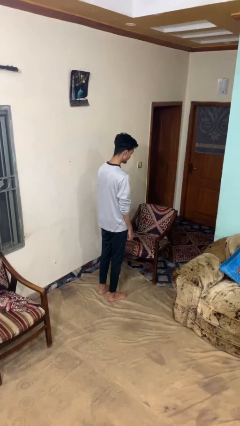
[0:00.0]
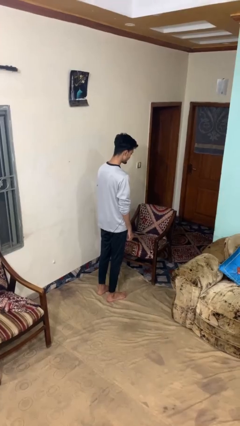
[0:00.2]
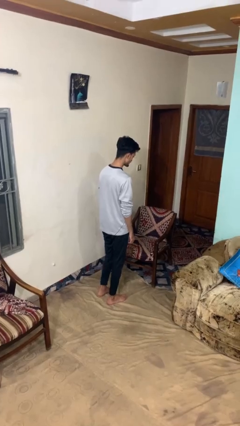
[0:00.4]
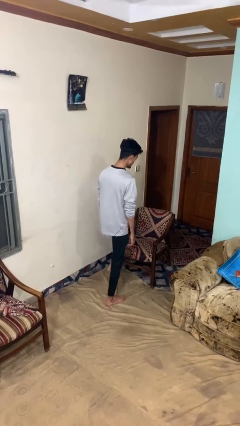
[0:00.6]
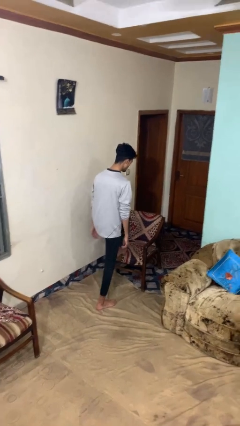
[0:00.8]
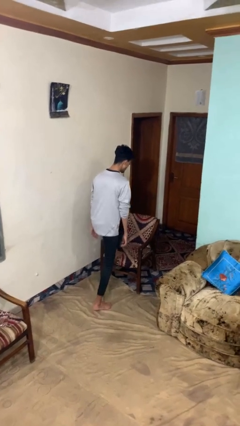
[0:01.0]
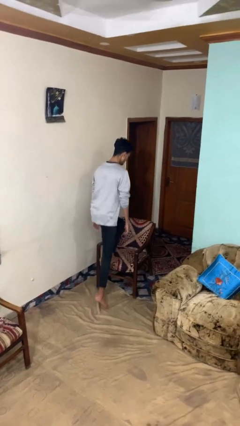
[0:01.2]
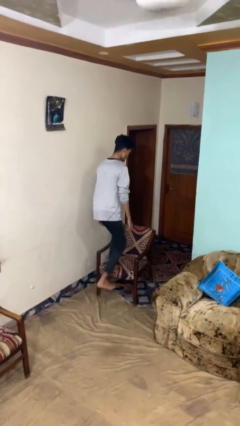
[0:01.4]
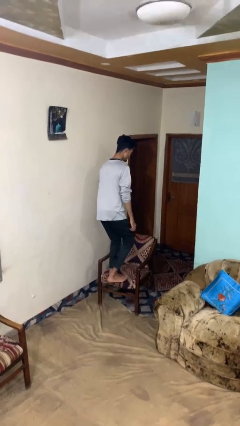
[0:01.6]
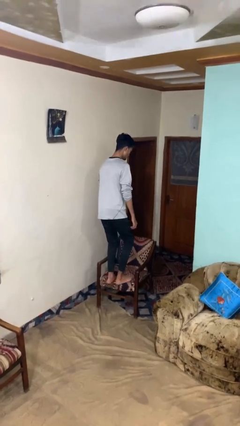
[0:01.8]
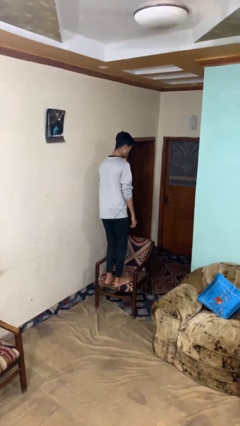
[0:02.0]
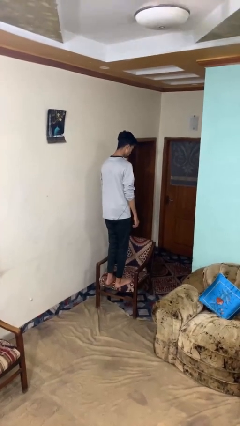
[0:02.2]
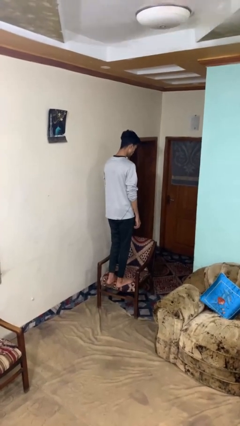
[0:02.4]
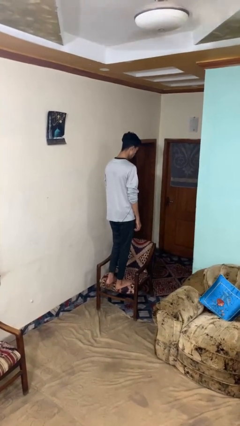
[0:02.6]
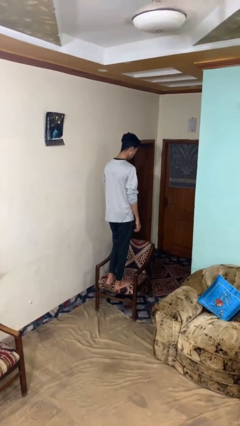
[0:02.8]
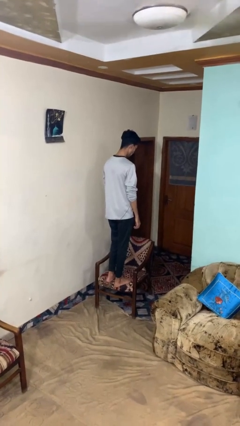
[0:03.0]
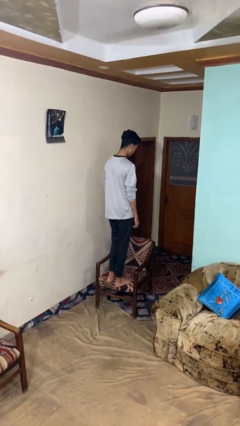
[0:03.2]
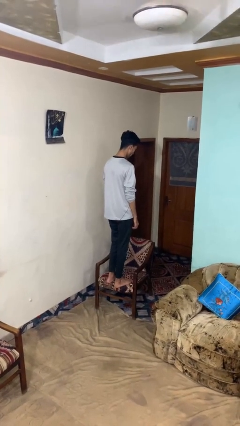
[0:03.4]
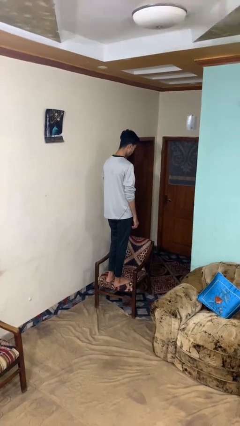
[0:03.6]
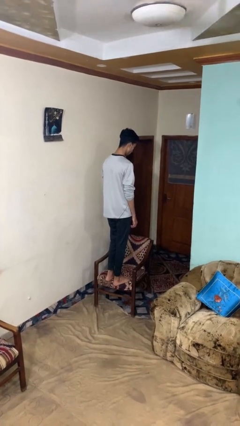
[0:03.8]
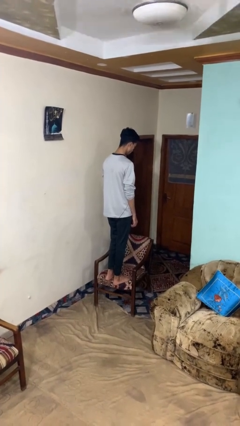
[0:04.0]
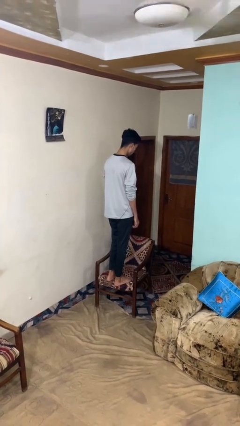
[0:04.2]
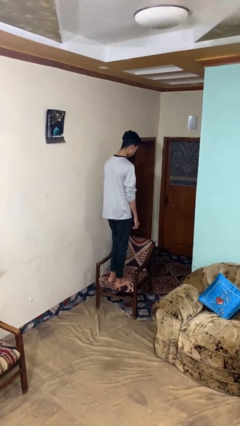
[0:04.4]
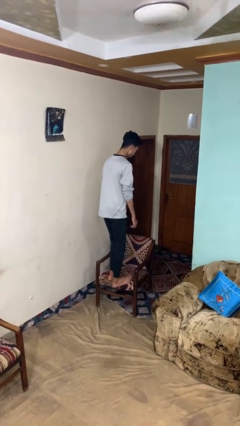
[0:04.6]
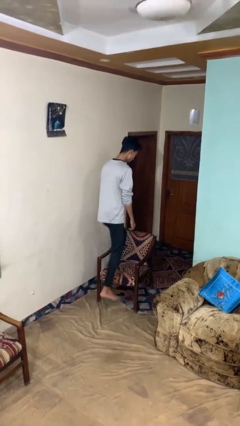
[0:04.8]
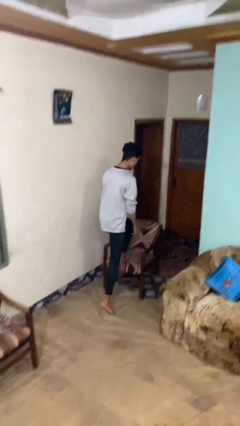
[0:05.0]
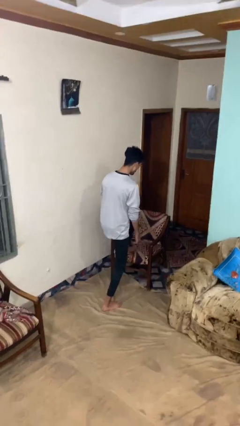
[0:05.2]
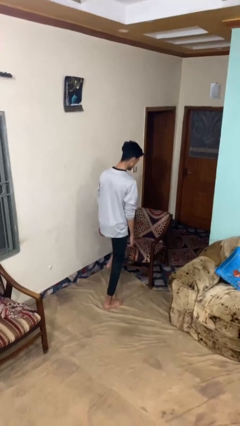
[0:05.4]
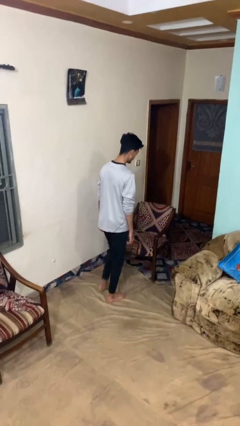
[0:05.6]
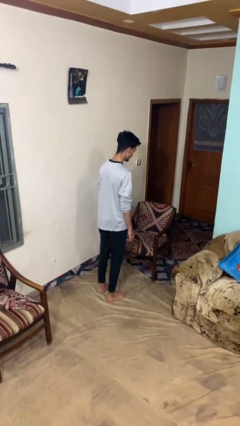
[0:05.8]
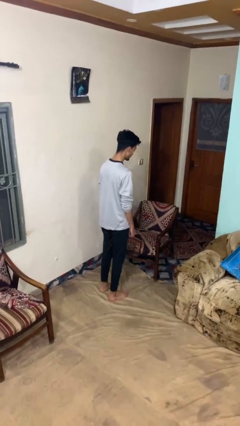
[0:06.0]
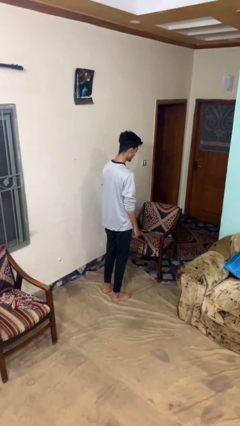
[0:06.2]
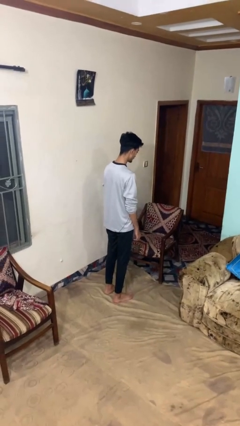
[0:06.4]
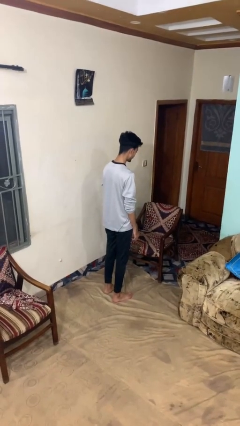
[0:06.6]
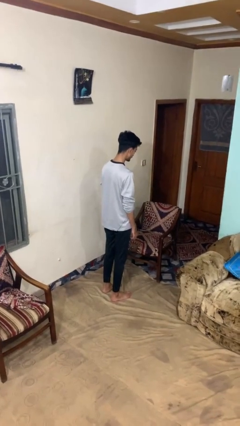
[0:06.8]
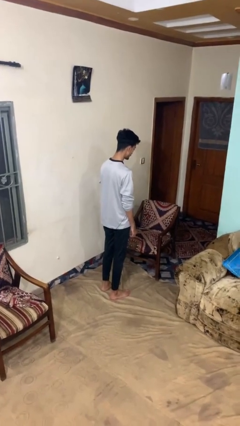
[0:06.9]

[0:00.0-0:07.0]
person climbs on chair

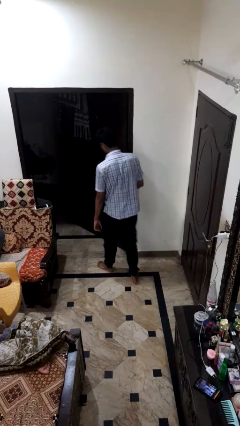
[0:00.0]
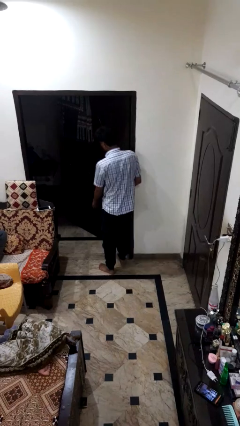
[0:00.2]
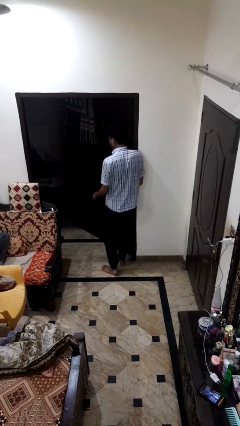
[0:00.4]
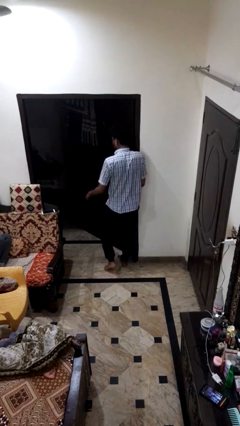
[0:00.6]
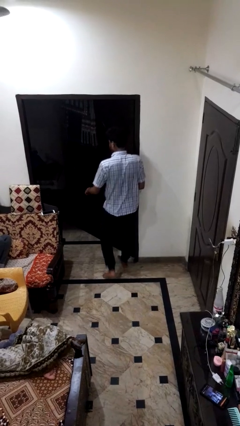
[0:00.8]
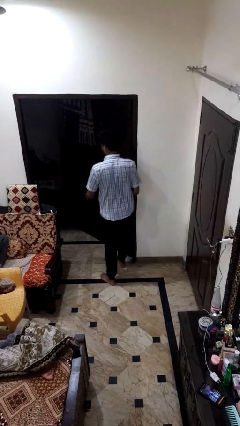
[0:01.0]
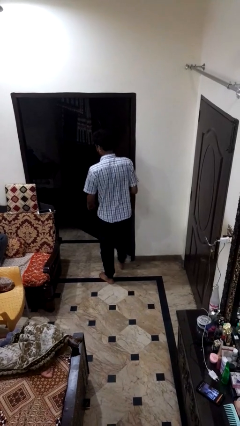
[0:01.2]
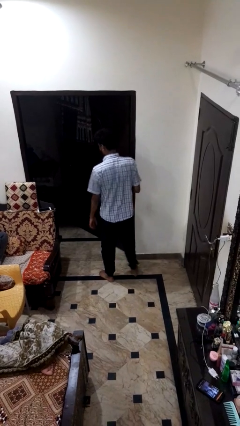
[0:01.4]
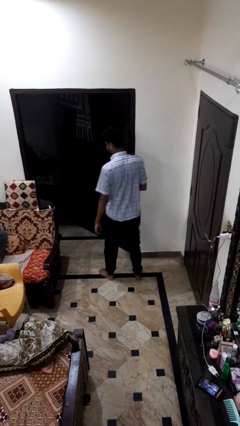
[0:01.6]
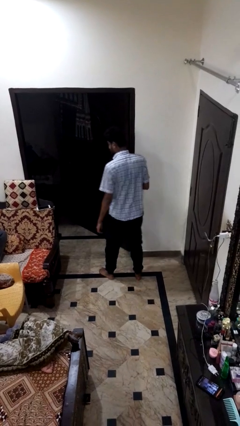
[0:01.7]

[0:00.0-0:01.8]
person bumps into wall

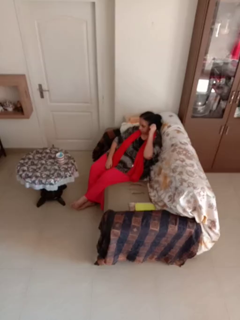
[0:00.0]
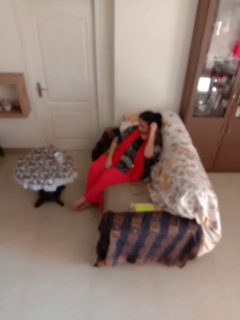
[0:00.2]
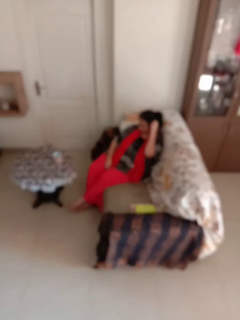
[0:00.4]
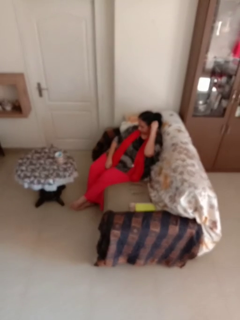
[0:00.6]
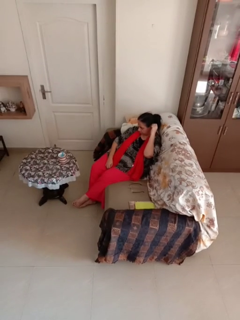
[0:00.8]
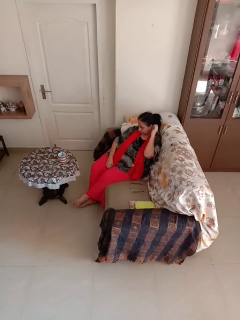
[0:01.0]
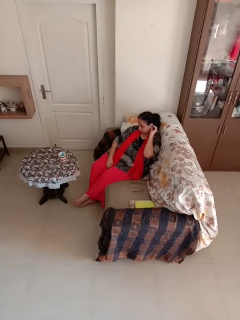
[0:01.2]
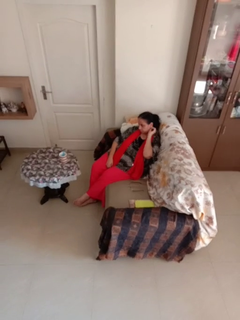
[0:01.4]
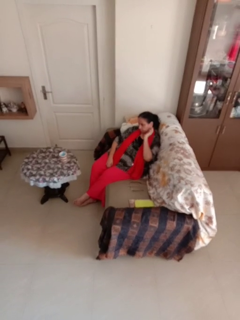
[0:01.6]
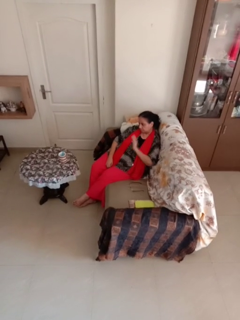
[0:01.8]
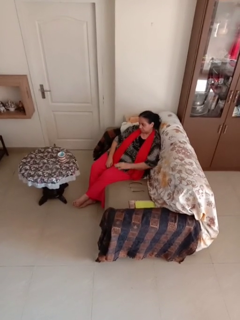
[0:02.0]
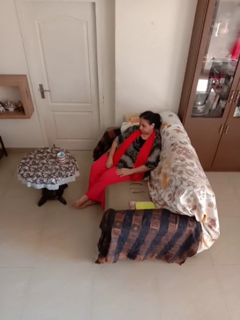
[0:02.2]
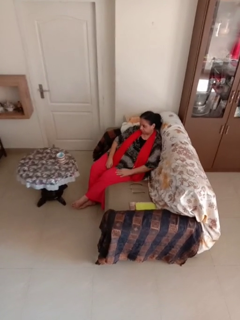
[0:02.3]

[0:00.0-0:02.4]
person strokes hair

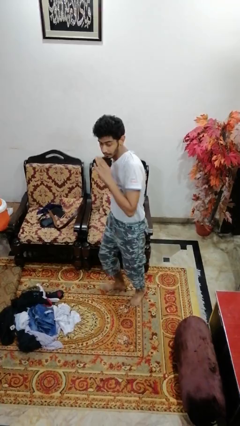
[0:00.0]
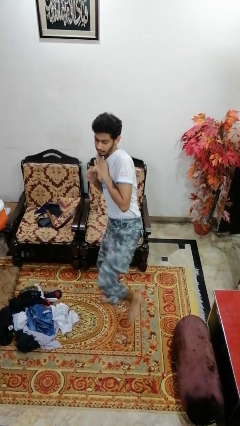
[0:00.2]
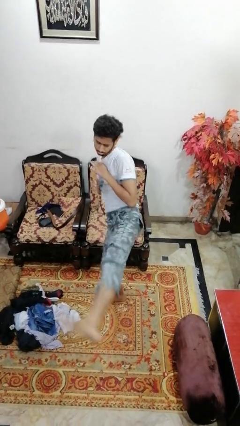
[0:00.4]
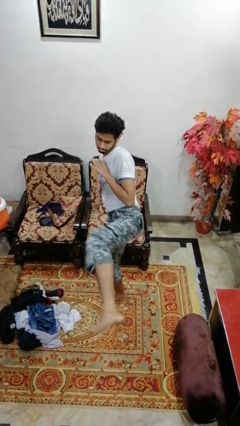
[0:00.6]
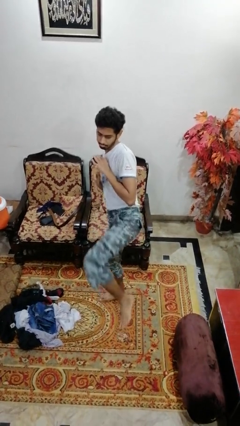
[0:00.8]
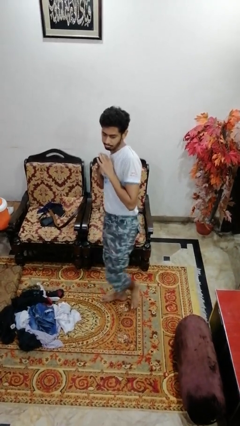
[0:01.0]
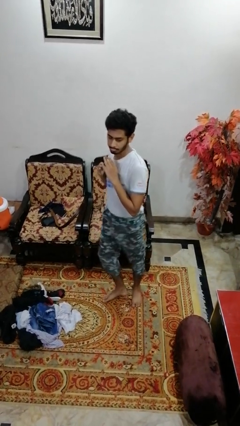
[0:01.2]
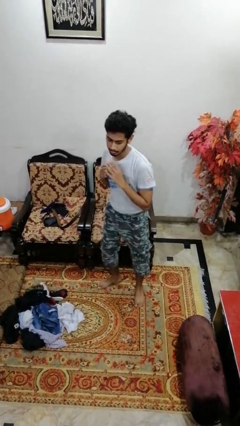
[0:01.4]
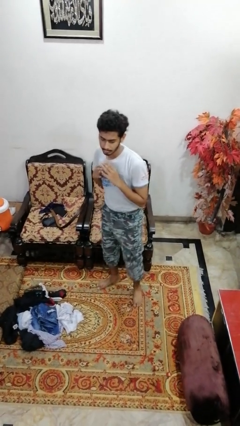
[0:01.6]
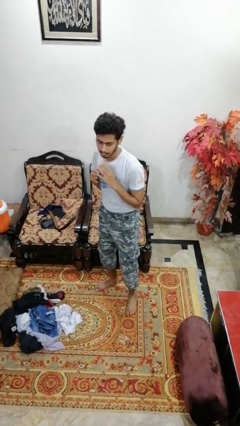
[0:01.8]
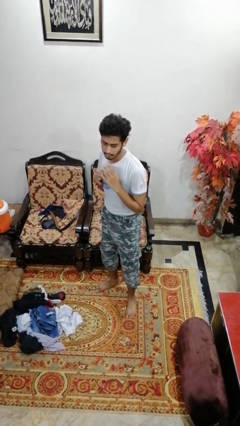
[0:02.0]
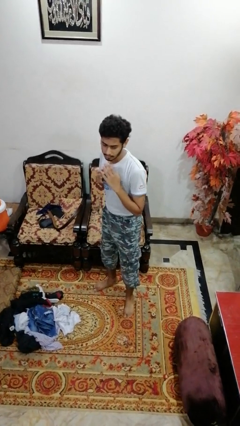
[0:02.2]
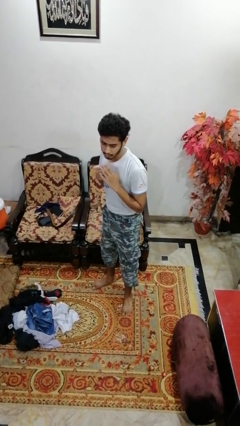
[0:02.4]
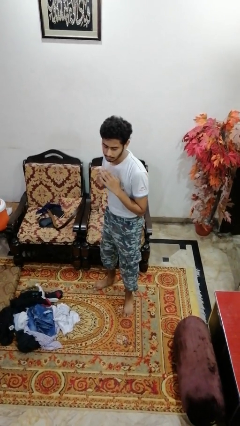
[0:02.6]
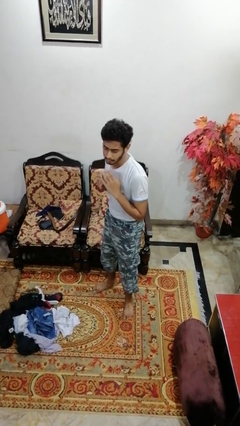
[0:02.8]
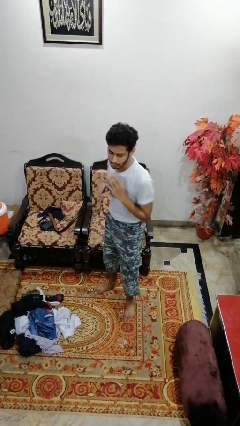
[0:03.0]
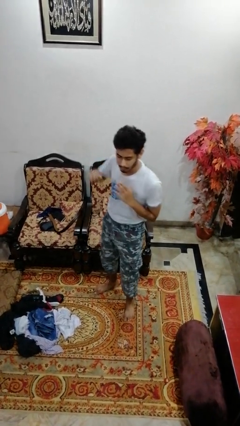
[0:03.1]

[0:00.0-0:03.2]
person karate kicks

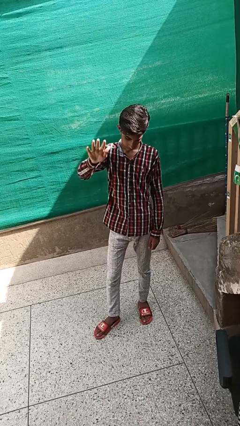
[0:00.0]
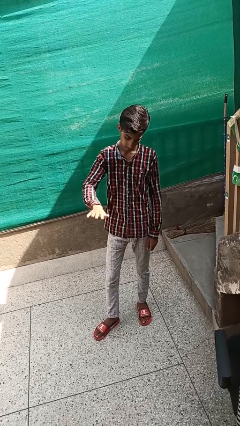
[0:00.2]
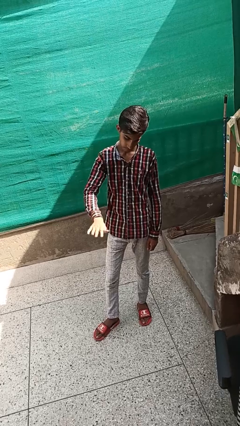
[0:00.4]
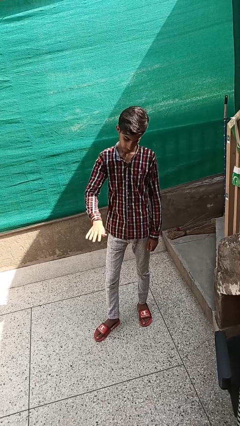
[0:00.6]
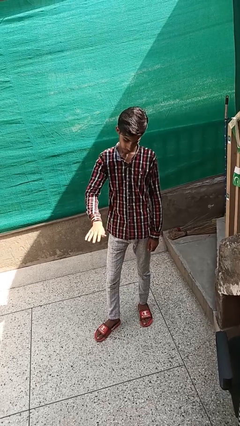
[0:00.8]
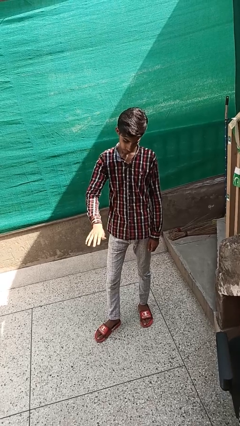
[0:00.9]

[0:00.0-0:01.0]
person gestures swipe down

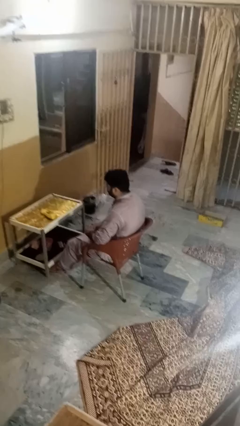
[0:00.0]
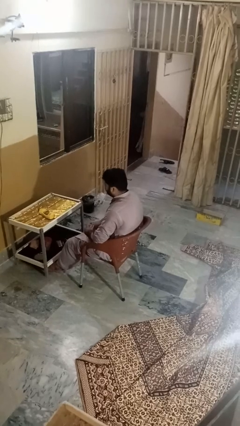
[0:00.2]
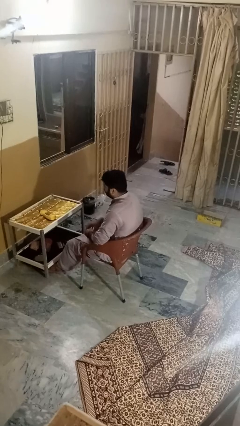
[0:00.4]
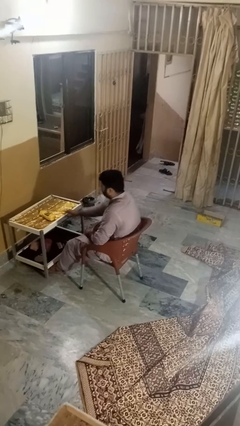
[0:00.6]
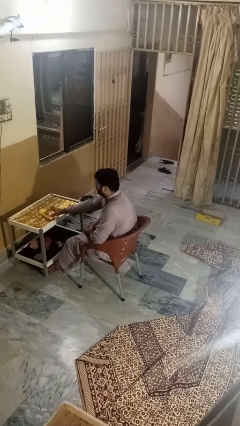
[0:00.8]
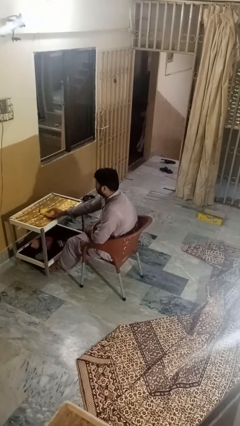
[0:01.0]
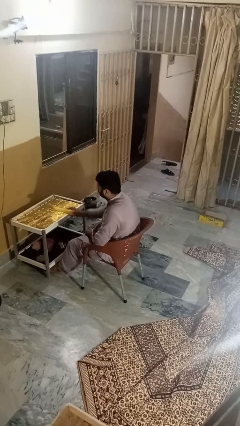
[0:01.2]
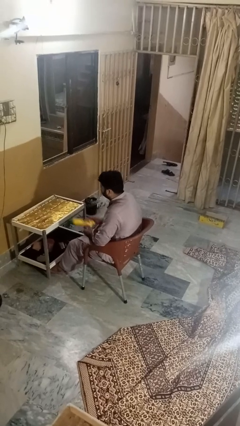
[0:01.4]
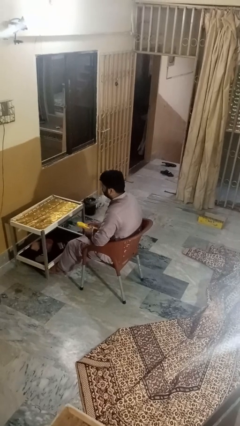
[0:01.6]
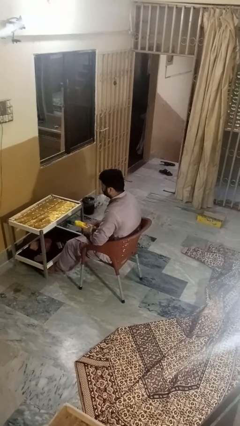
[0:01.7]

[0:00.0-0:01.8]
person picks up object from table

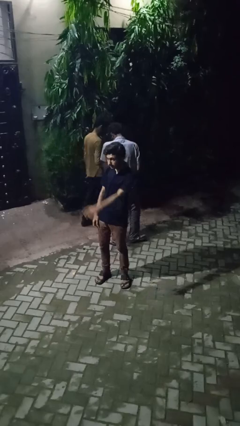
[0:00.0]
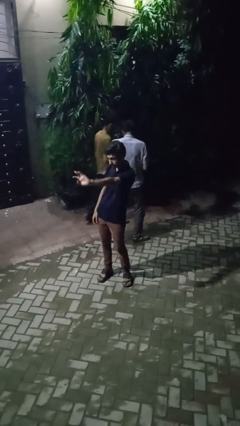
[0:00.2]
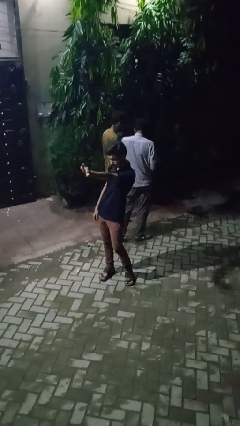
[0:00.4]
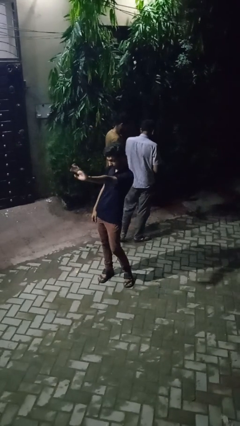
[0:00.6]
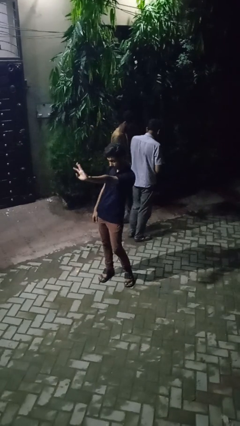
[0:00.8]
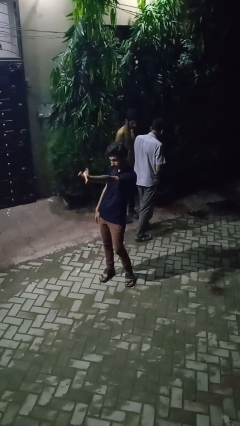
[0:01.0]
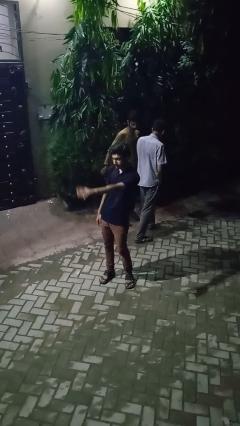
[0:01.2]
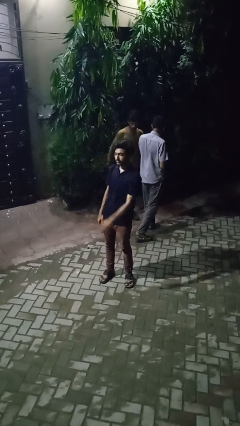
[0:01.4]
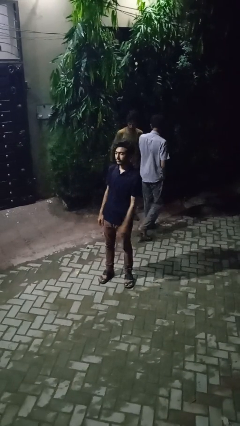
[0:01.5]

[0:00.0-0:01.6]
person waves at person
